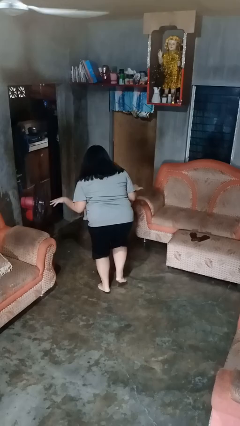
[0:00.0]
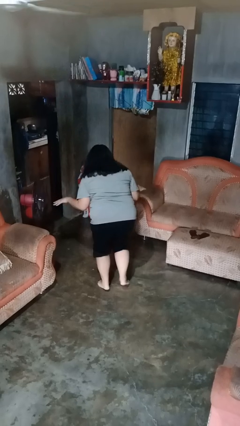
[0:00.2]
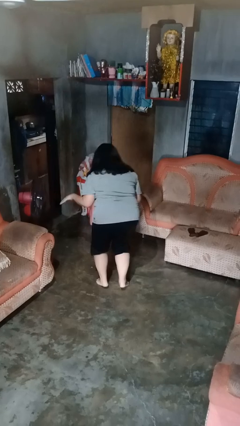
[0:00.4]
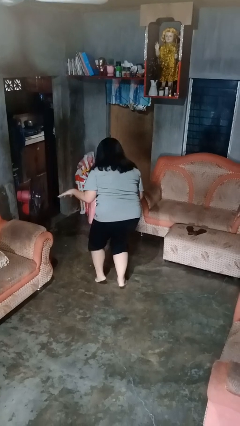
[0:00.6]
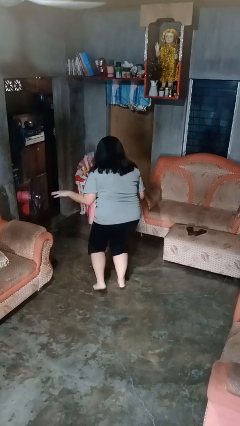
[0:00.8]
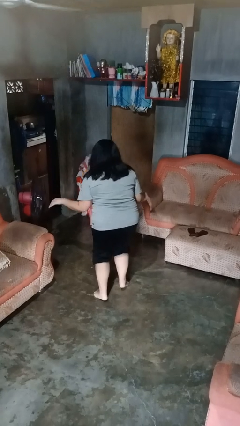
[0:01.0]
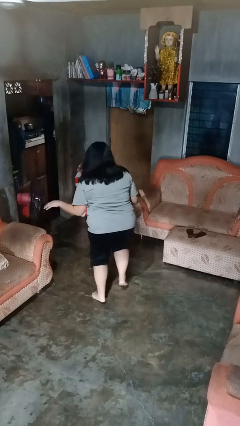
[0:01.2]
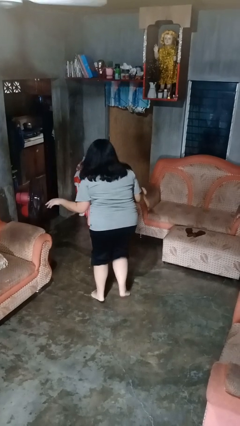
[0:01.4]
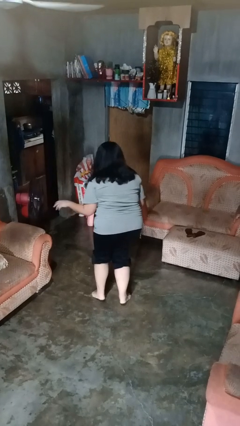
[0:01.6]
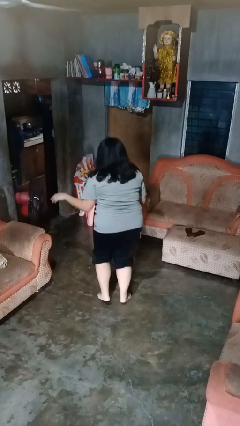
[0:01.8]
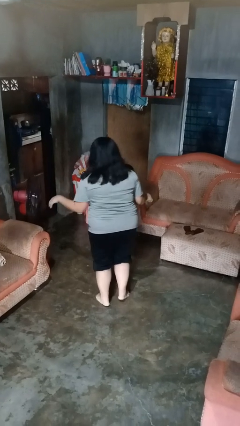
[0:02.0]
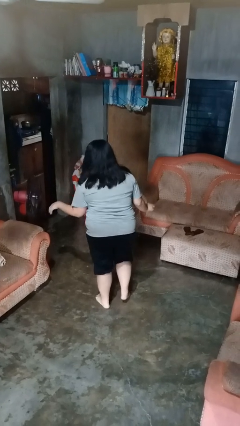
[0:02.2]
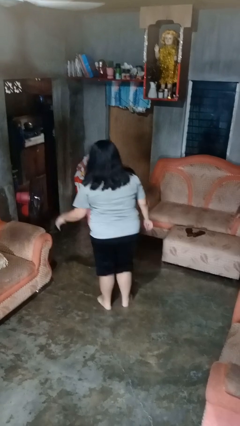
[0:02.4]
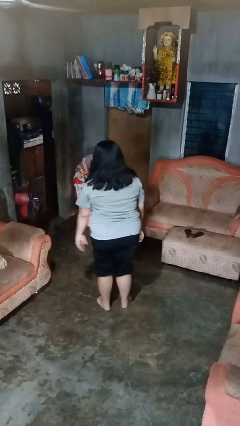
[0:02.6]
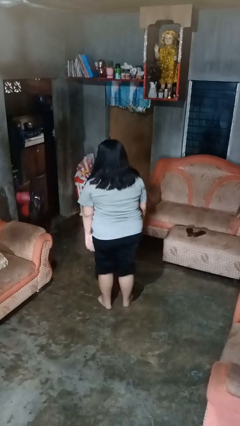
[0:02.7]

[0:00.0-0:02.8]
person walks tiptoe

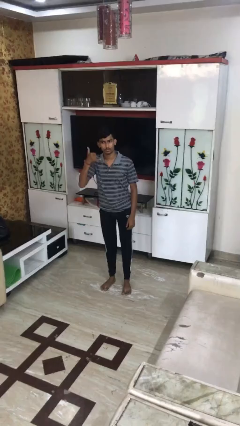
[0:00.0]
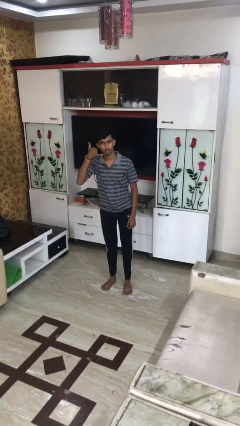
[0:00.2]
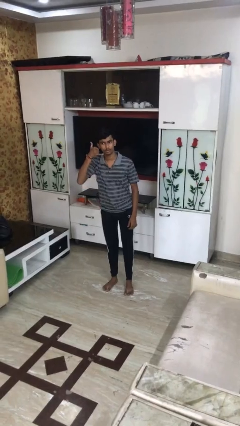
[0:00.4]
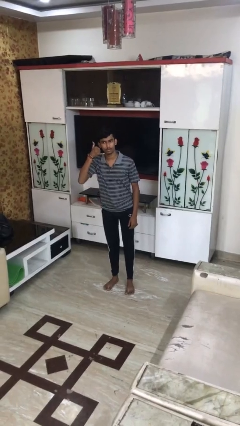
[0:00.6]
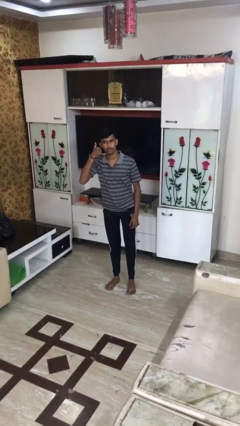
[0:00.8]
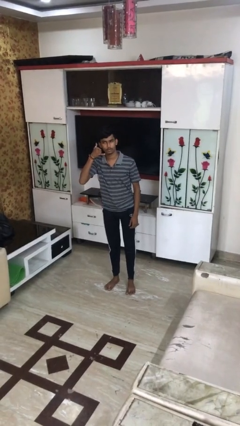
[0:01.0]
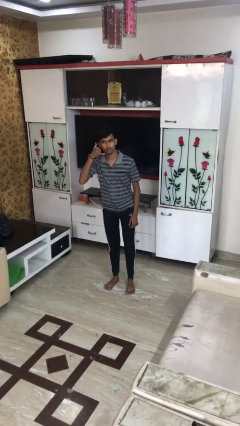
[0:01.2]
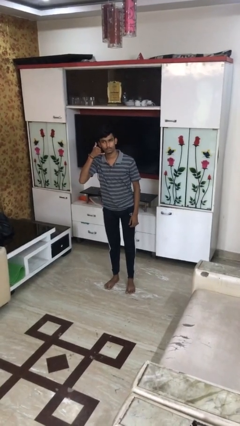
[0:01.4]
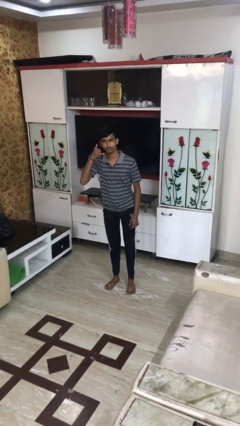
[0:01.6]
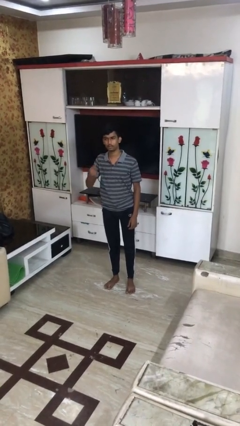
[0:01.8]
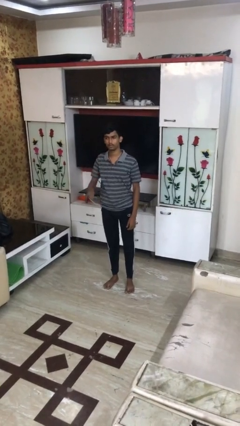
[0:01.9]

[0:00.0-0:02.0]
person gestures call me

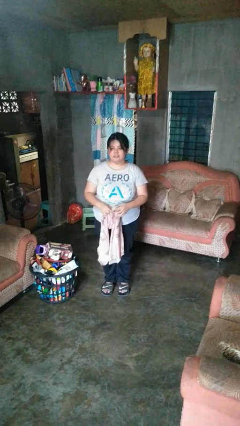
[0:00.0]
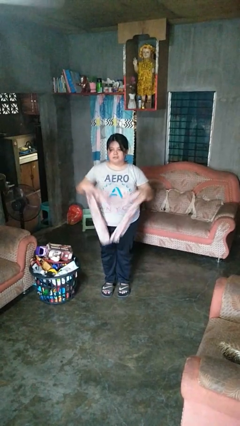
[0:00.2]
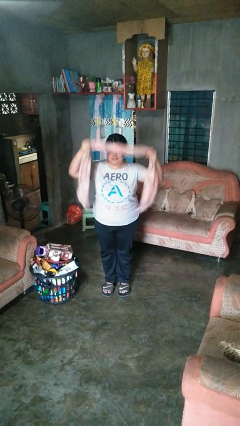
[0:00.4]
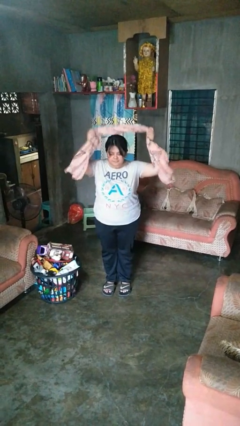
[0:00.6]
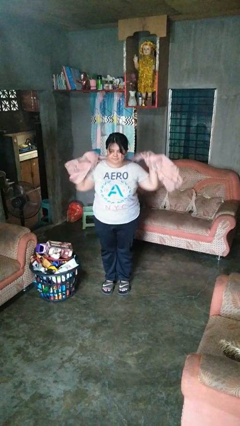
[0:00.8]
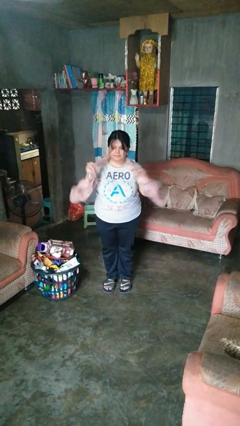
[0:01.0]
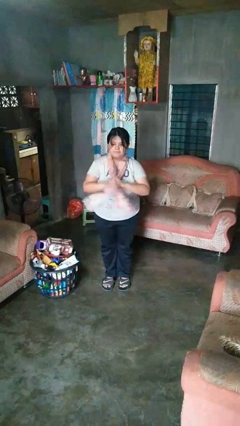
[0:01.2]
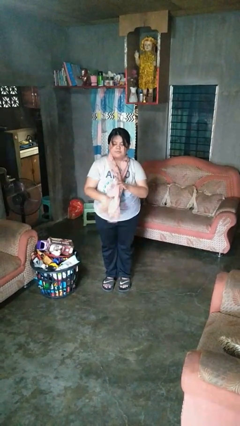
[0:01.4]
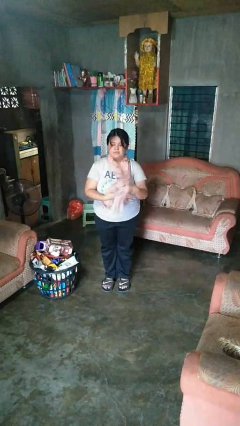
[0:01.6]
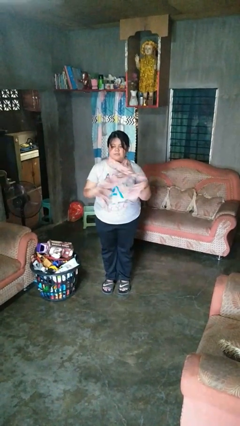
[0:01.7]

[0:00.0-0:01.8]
person puts on scarf

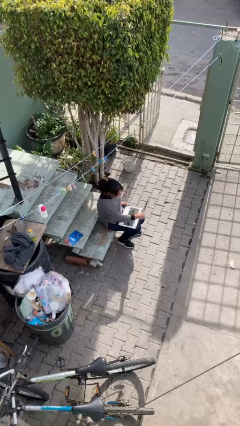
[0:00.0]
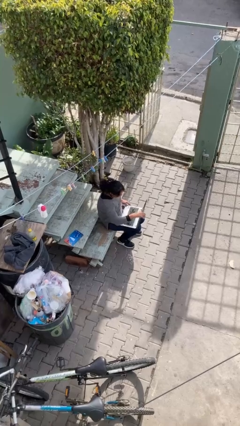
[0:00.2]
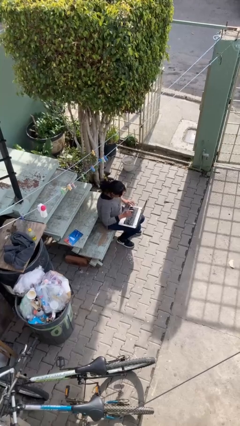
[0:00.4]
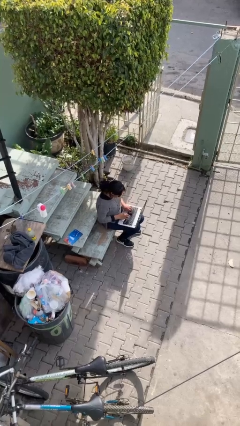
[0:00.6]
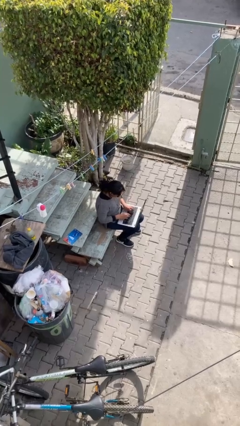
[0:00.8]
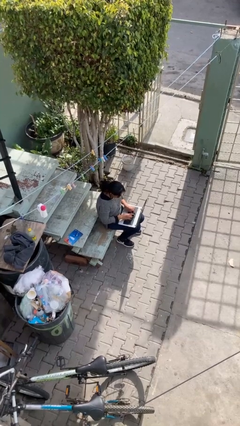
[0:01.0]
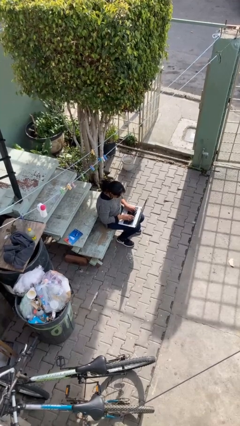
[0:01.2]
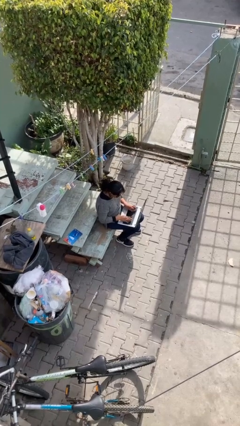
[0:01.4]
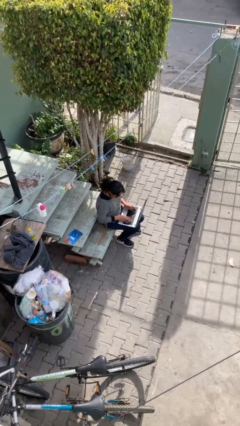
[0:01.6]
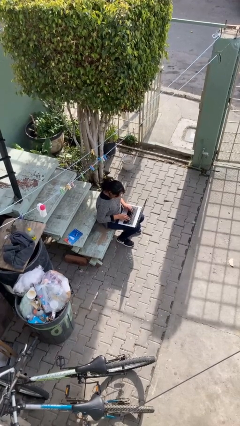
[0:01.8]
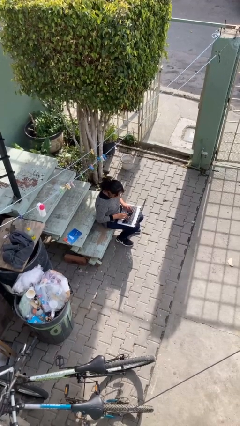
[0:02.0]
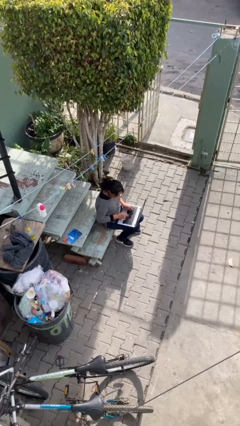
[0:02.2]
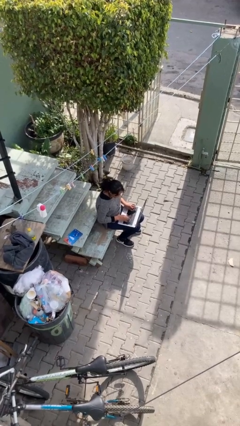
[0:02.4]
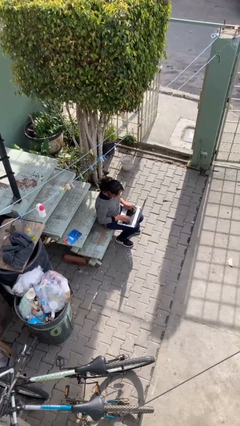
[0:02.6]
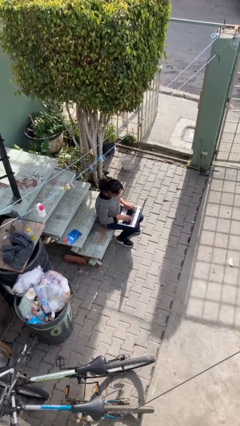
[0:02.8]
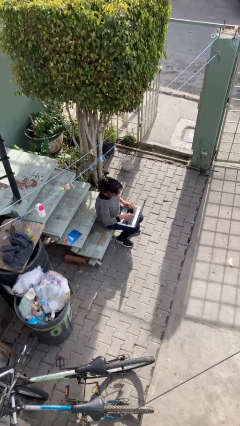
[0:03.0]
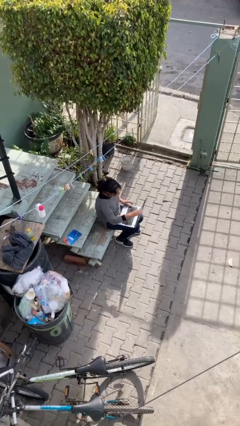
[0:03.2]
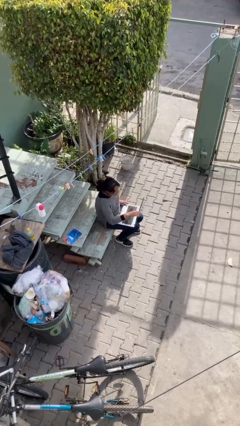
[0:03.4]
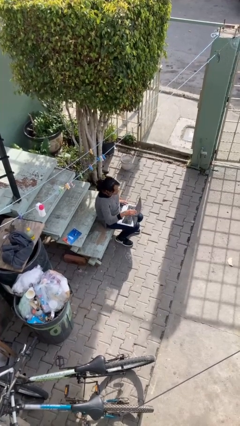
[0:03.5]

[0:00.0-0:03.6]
person interacts with laptop

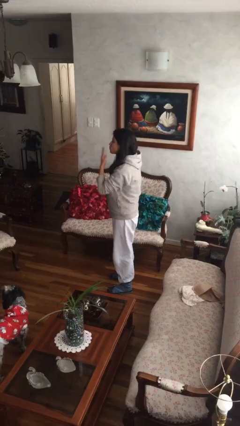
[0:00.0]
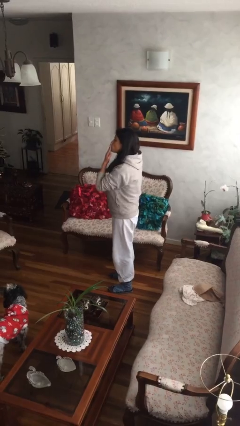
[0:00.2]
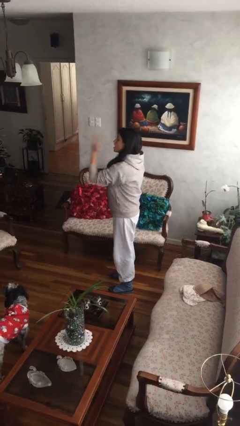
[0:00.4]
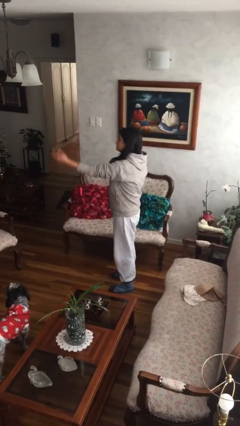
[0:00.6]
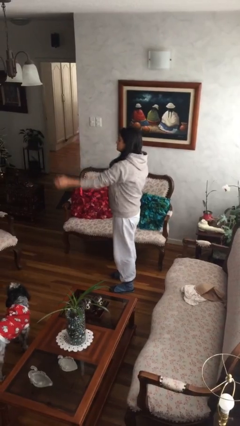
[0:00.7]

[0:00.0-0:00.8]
person gestures blow kiss

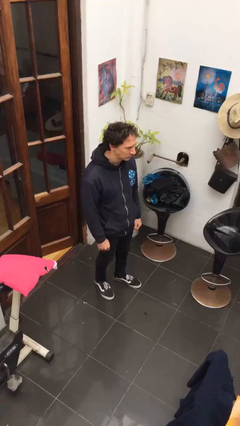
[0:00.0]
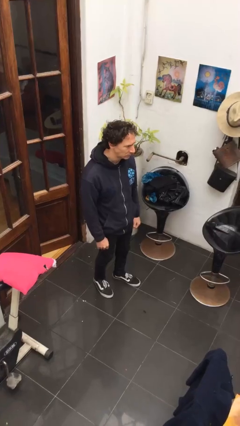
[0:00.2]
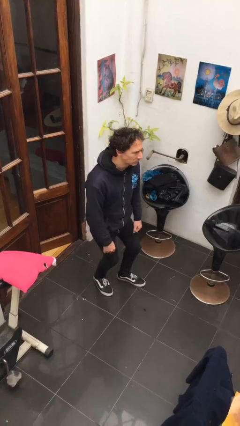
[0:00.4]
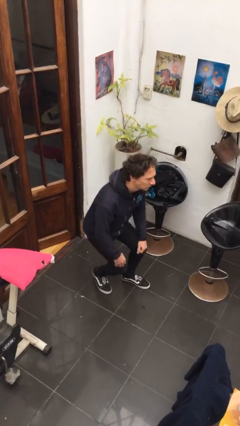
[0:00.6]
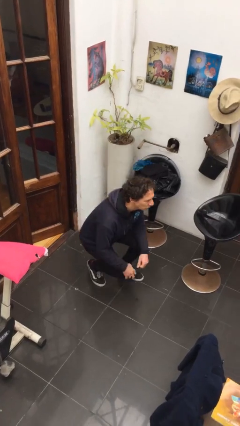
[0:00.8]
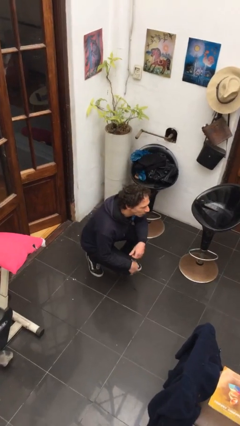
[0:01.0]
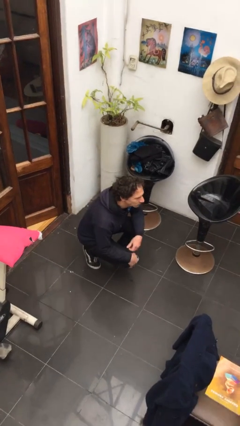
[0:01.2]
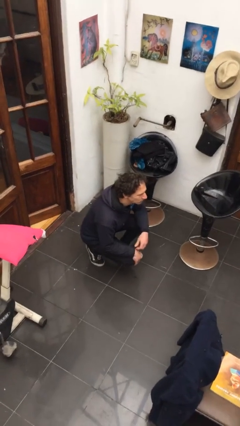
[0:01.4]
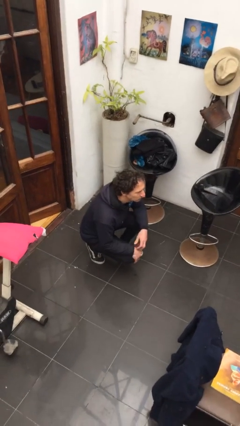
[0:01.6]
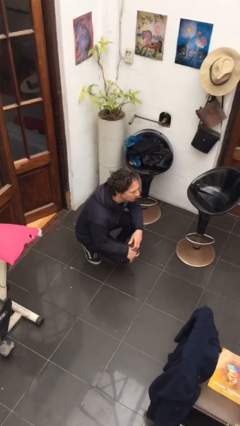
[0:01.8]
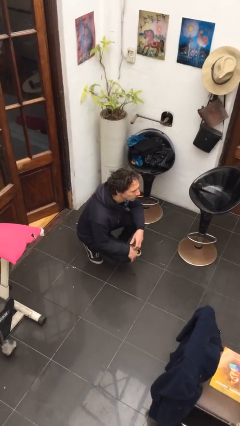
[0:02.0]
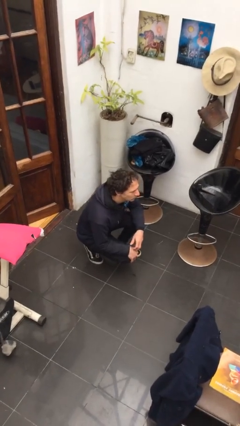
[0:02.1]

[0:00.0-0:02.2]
person squats

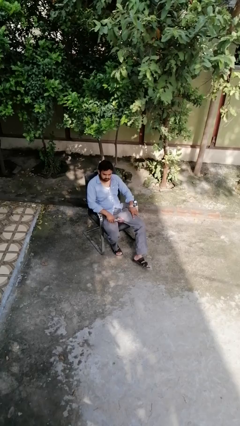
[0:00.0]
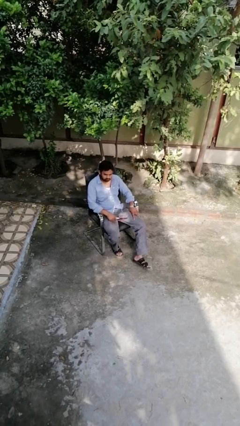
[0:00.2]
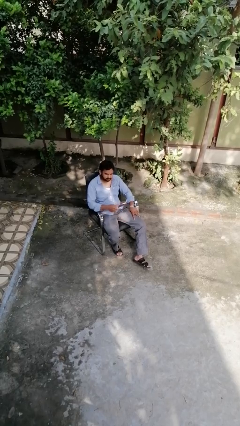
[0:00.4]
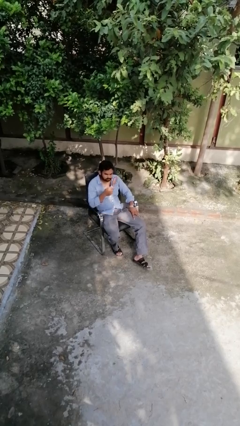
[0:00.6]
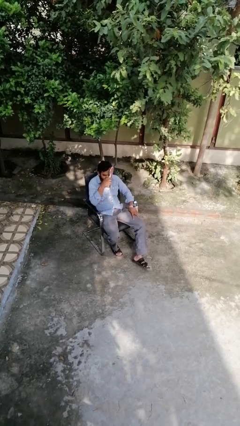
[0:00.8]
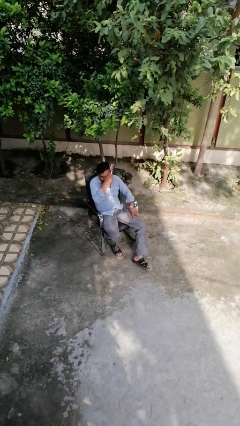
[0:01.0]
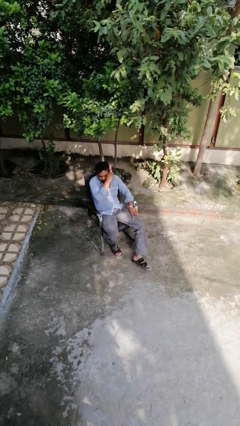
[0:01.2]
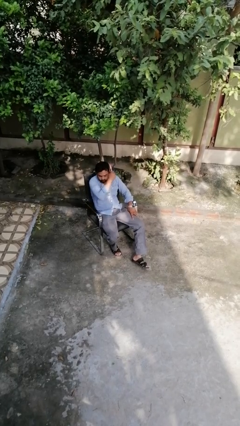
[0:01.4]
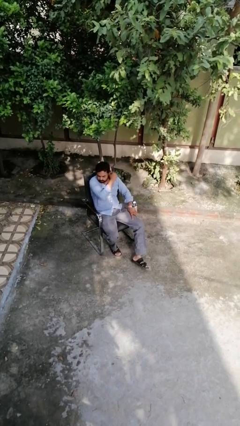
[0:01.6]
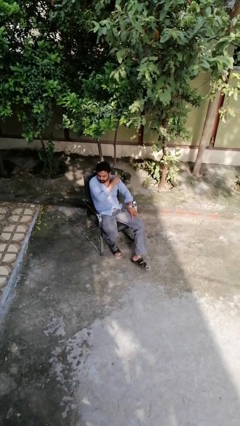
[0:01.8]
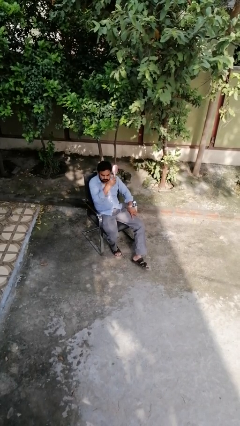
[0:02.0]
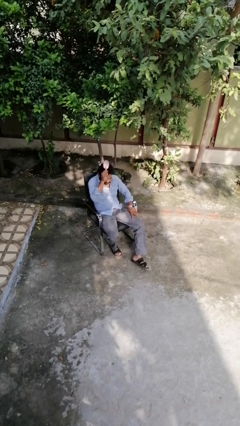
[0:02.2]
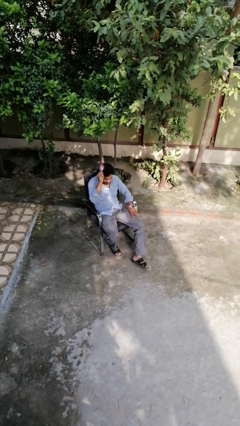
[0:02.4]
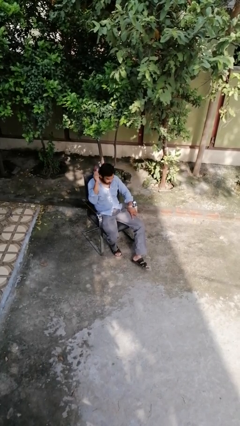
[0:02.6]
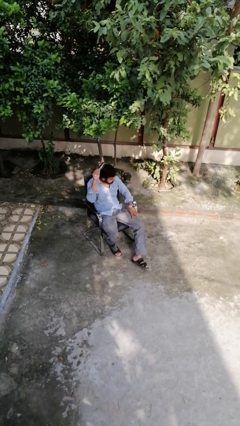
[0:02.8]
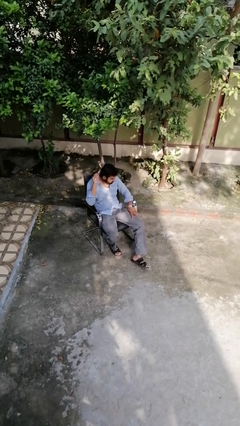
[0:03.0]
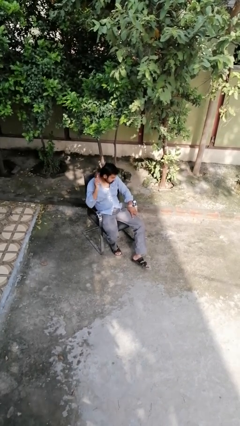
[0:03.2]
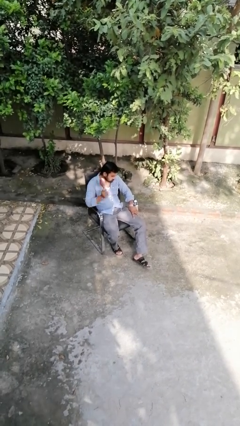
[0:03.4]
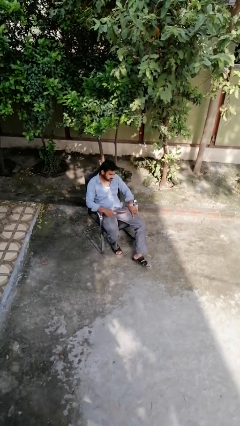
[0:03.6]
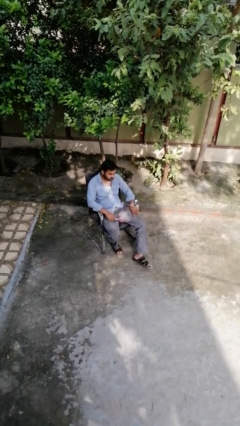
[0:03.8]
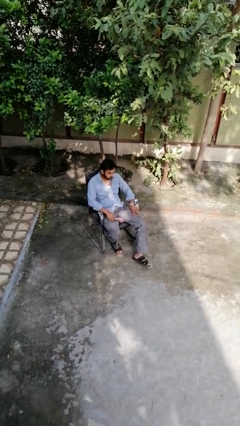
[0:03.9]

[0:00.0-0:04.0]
person brushes hair
